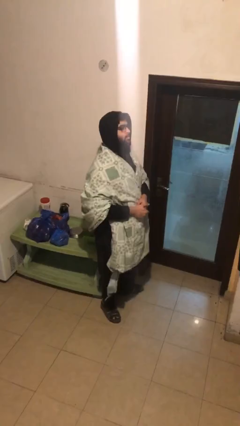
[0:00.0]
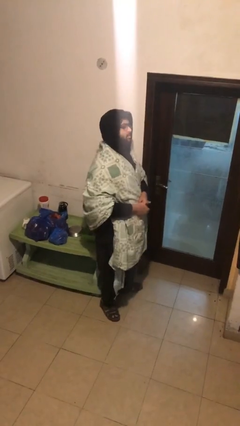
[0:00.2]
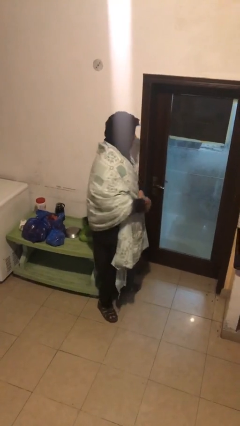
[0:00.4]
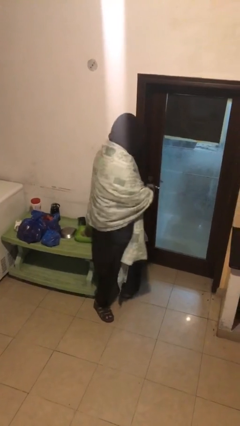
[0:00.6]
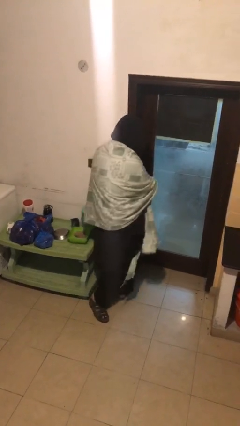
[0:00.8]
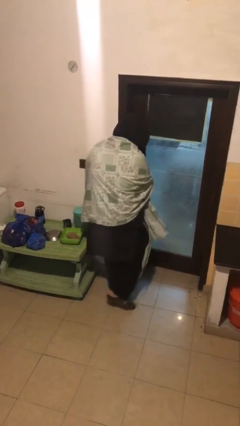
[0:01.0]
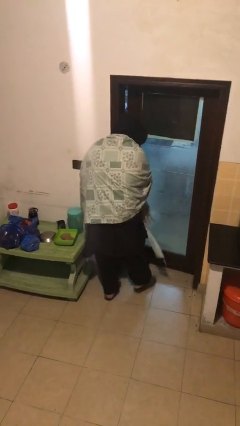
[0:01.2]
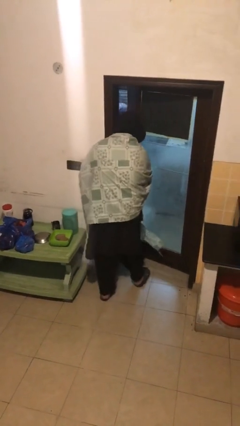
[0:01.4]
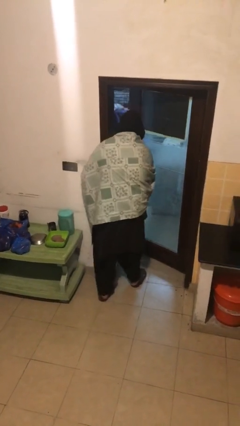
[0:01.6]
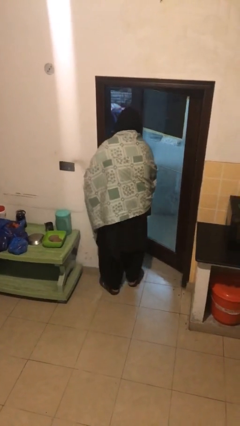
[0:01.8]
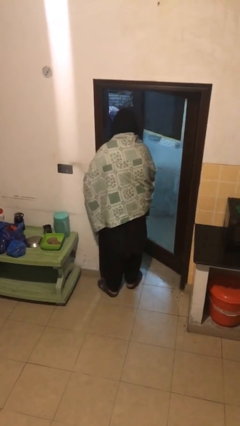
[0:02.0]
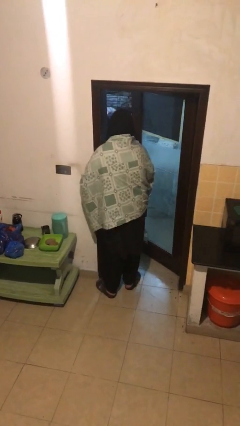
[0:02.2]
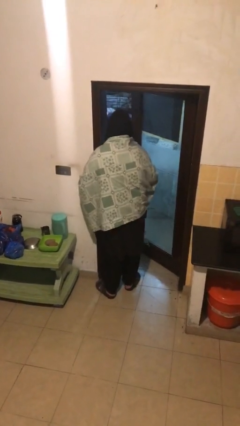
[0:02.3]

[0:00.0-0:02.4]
person opens facility door

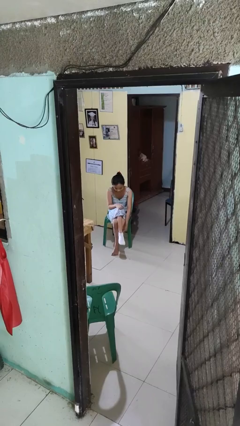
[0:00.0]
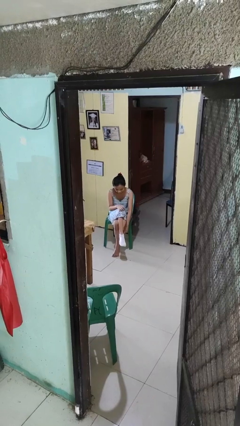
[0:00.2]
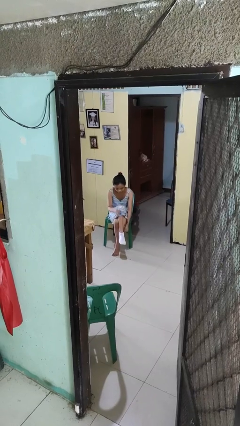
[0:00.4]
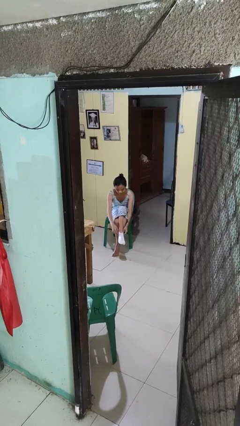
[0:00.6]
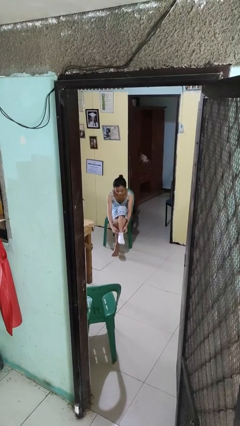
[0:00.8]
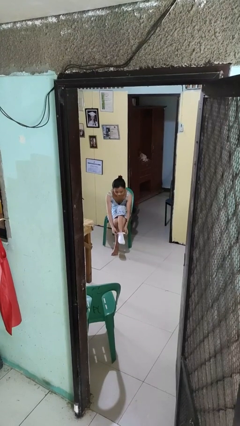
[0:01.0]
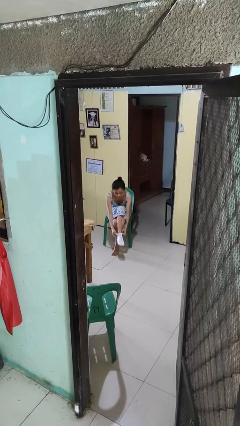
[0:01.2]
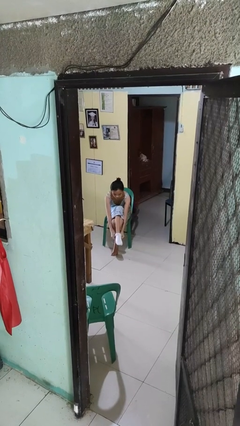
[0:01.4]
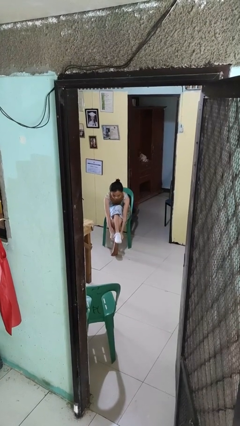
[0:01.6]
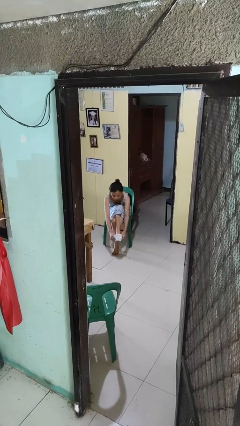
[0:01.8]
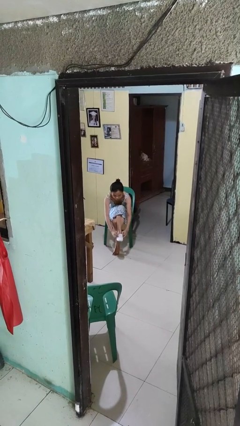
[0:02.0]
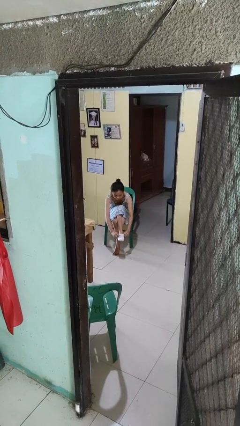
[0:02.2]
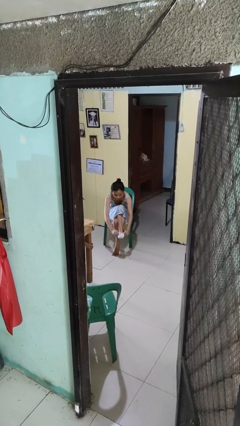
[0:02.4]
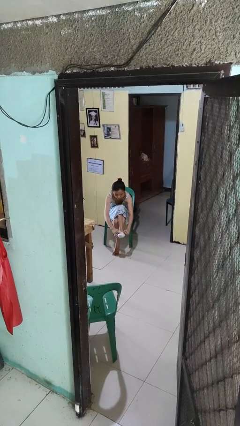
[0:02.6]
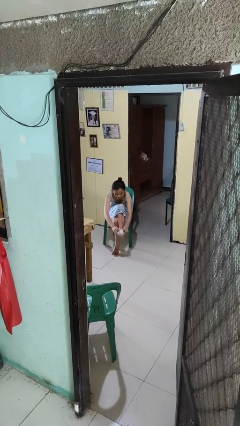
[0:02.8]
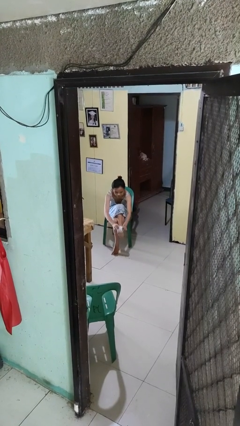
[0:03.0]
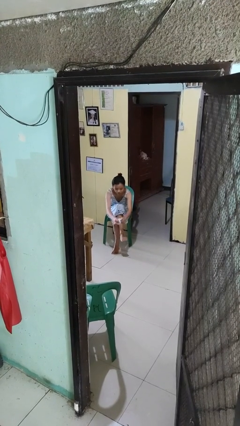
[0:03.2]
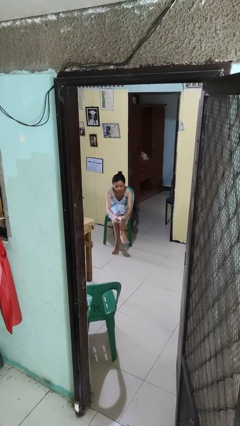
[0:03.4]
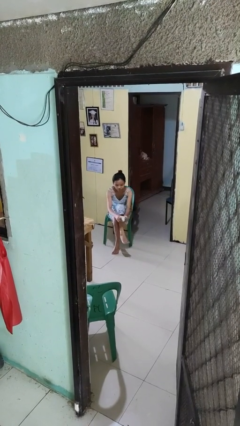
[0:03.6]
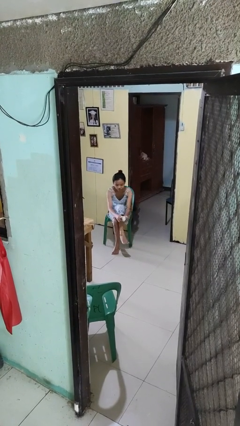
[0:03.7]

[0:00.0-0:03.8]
person takes off socks

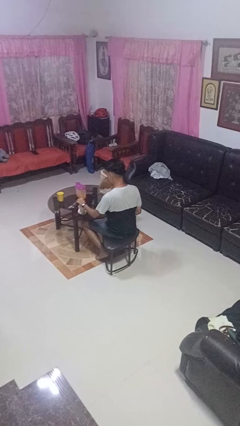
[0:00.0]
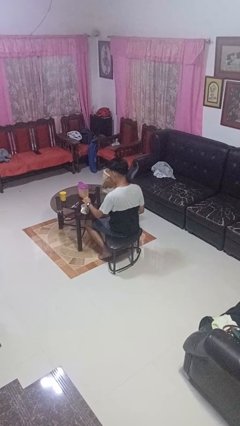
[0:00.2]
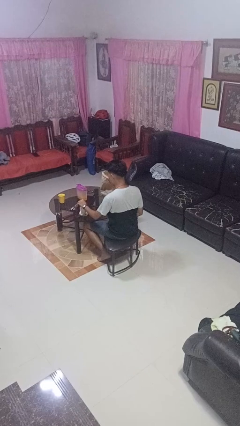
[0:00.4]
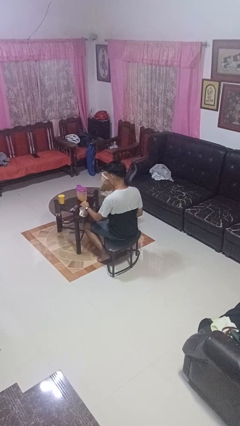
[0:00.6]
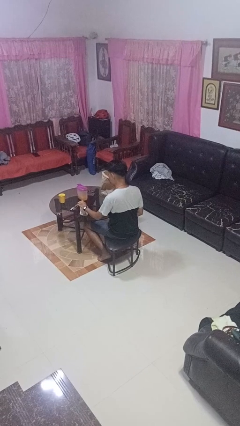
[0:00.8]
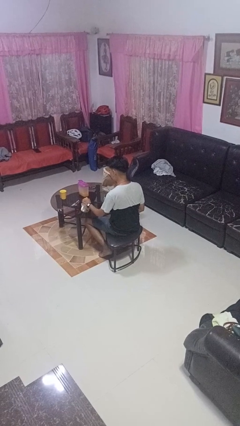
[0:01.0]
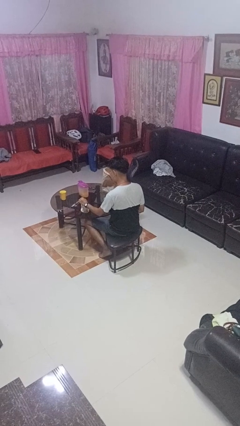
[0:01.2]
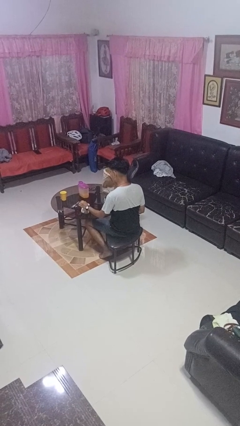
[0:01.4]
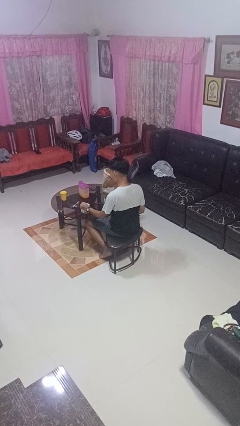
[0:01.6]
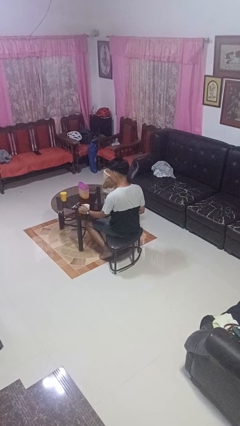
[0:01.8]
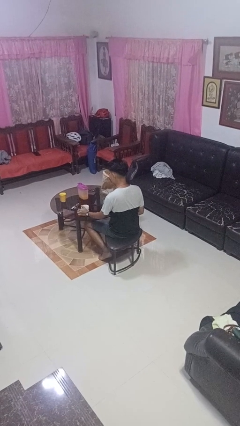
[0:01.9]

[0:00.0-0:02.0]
person stirs mug

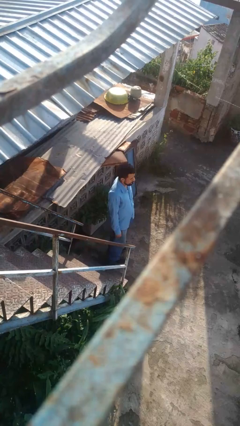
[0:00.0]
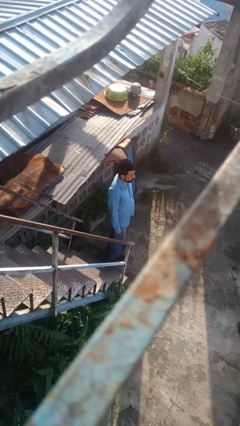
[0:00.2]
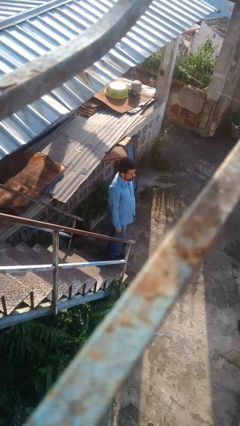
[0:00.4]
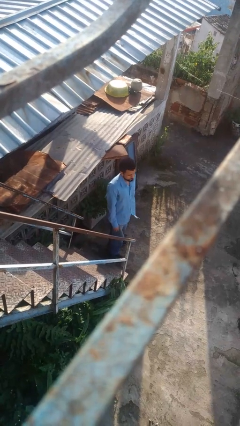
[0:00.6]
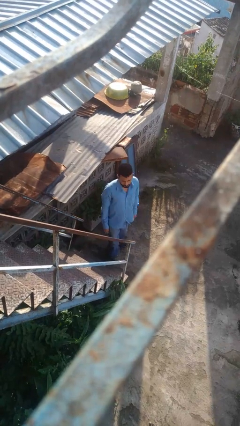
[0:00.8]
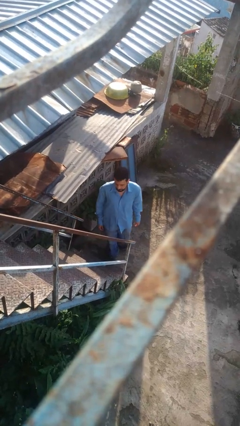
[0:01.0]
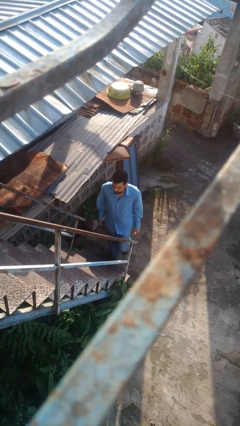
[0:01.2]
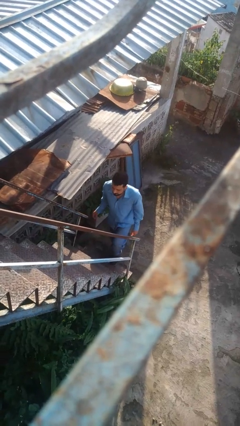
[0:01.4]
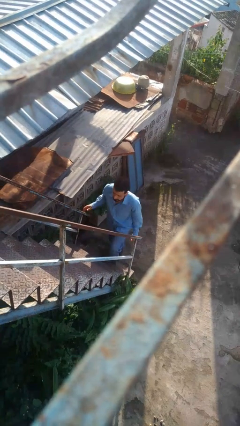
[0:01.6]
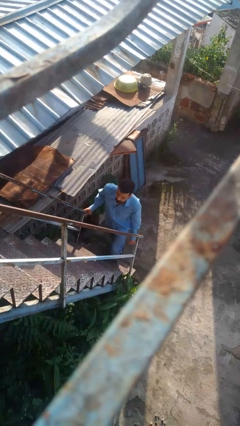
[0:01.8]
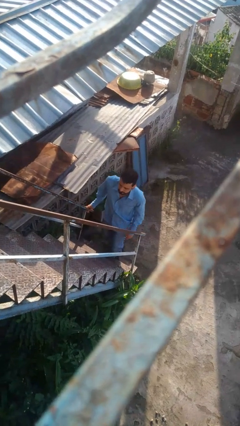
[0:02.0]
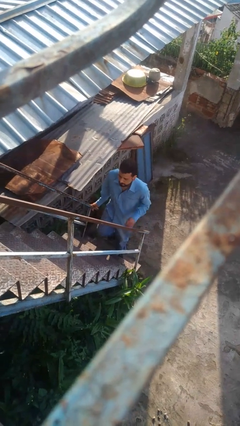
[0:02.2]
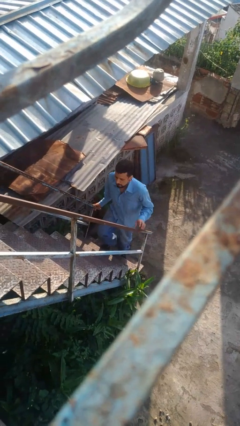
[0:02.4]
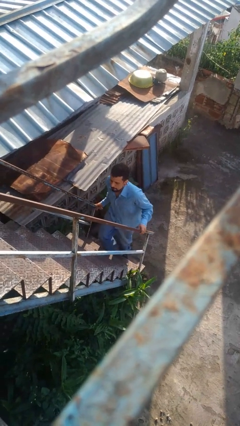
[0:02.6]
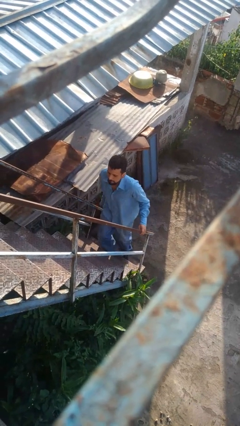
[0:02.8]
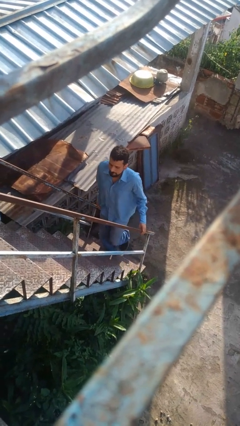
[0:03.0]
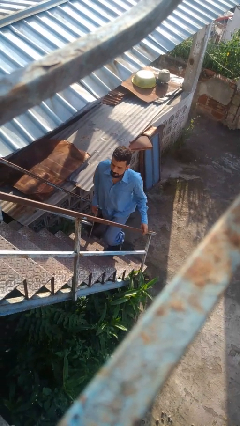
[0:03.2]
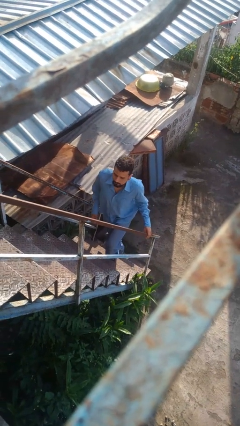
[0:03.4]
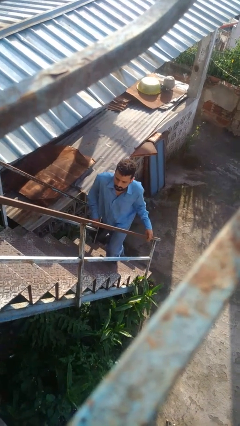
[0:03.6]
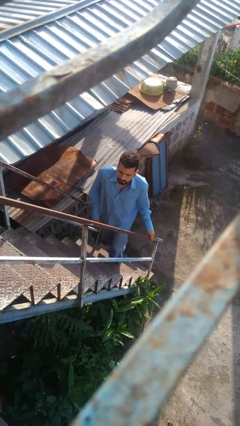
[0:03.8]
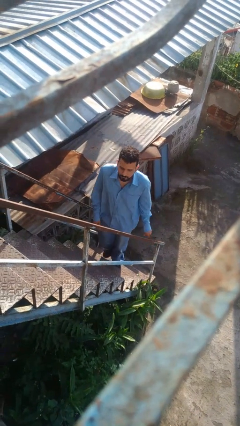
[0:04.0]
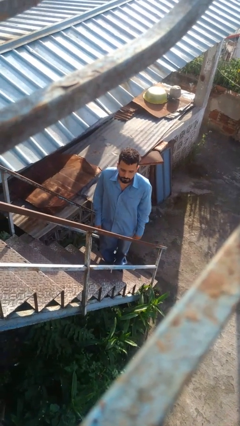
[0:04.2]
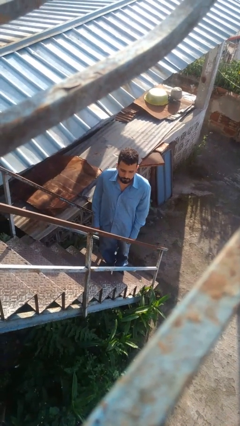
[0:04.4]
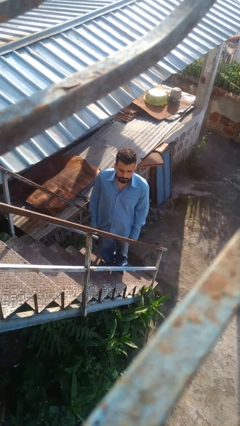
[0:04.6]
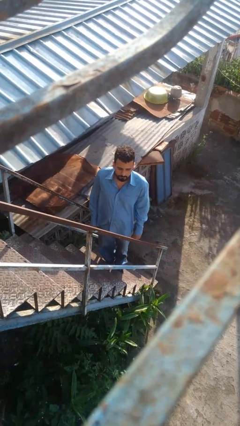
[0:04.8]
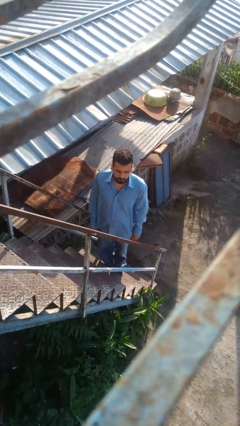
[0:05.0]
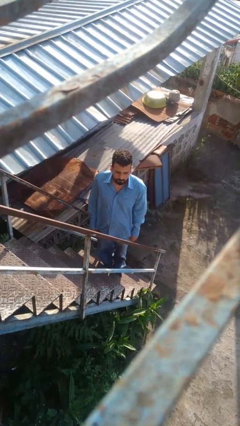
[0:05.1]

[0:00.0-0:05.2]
person climbs up stairs

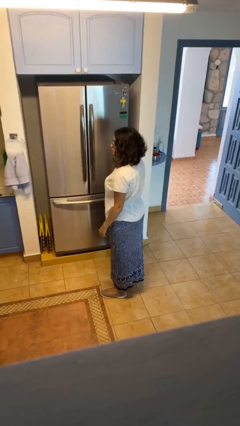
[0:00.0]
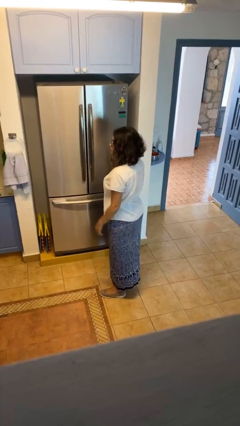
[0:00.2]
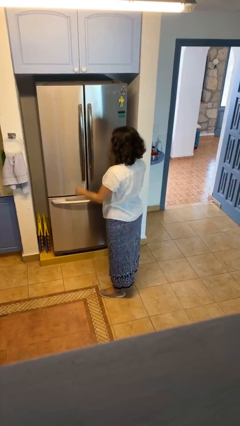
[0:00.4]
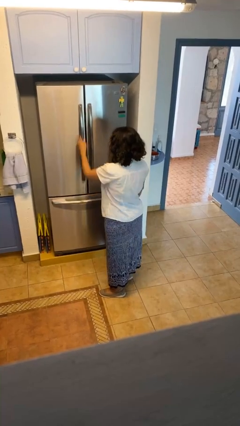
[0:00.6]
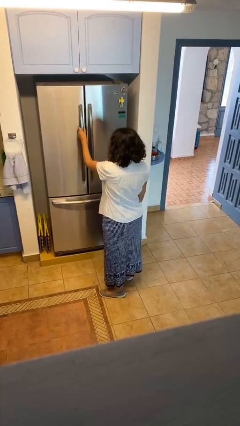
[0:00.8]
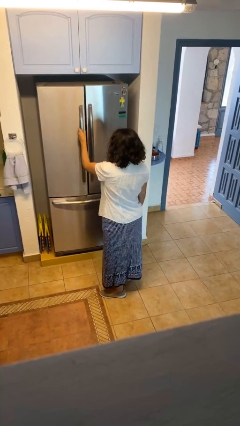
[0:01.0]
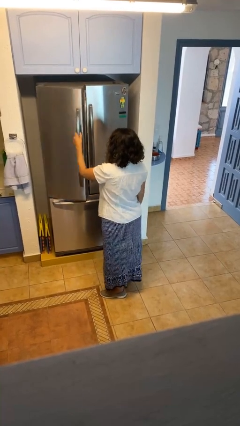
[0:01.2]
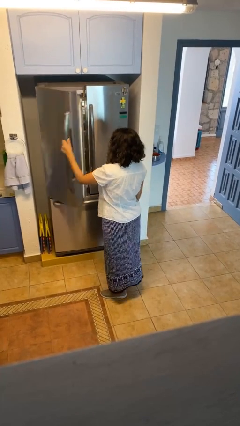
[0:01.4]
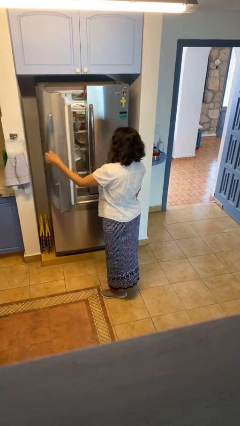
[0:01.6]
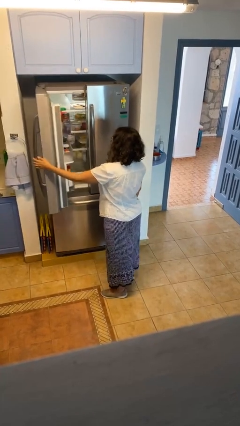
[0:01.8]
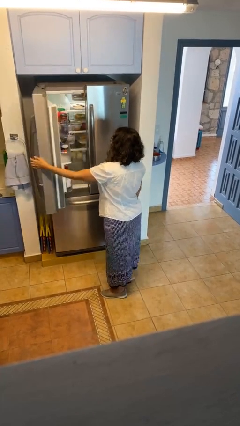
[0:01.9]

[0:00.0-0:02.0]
person opens refrigerator

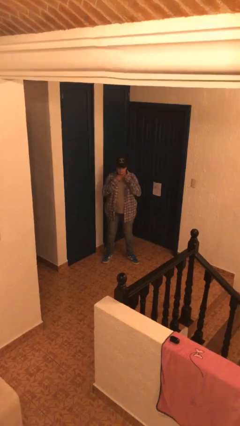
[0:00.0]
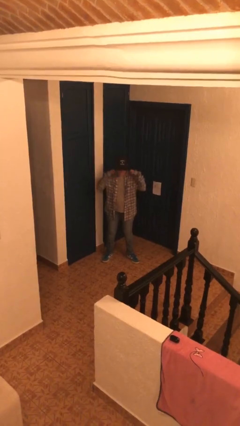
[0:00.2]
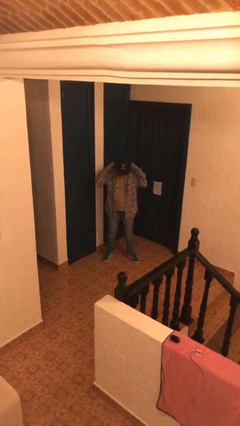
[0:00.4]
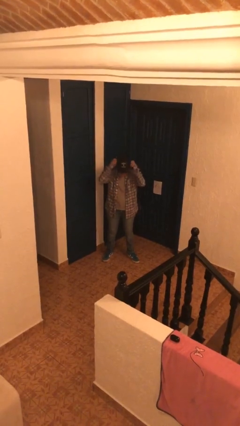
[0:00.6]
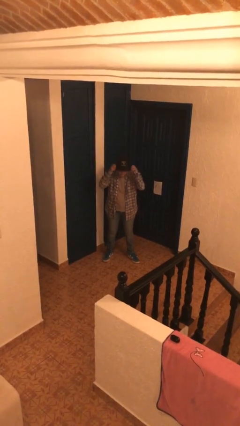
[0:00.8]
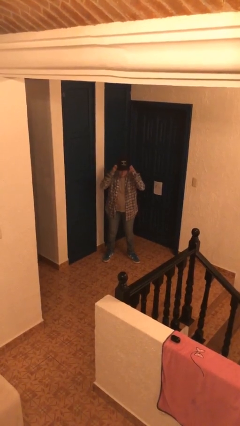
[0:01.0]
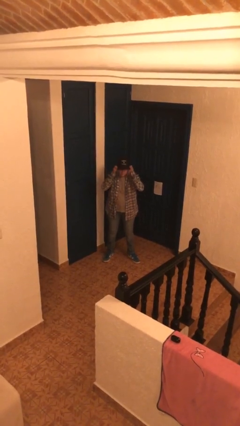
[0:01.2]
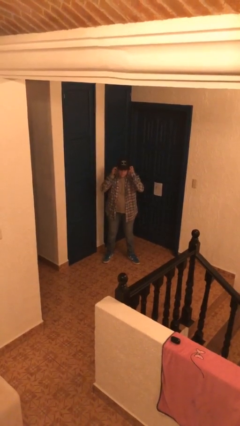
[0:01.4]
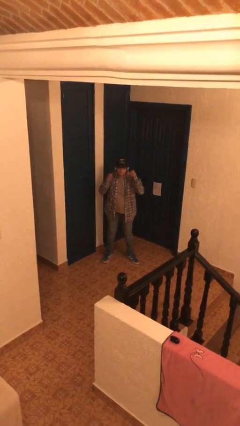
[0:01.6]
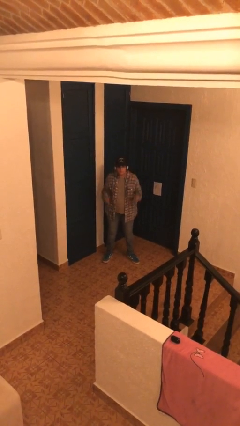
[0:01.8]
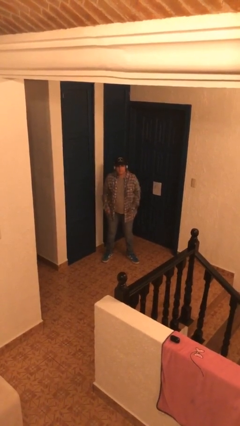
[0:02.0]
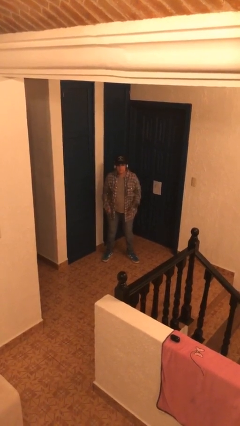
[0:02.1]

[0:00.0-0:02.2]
person puts on headphones

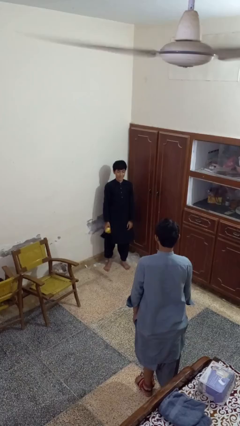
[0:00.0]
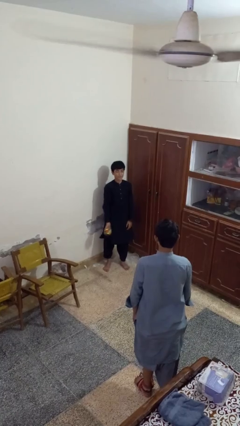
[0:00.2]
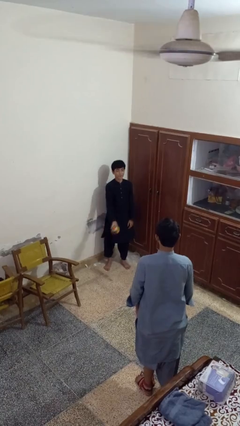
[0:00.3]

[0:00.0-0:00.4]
person throws object to person
